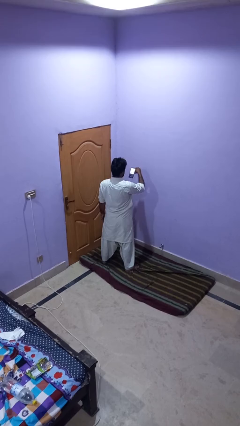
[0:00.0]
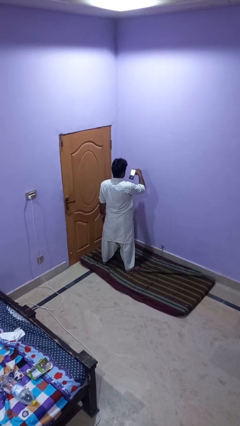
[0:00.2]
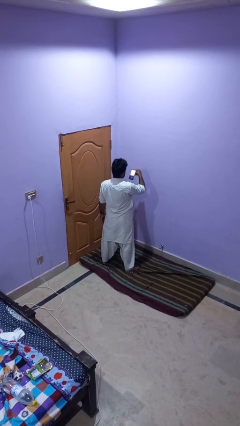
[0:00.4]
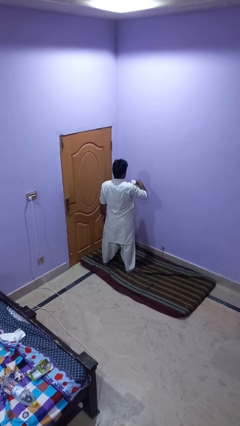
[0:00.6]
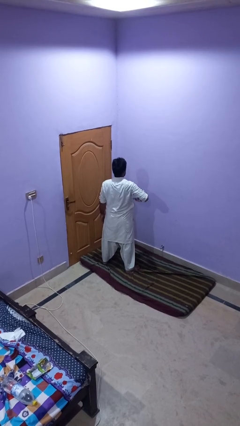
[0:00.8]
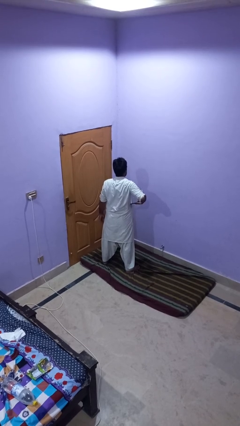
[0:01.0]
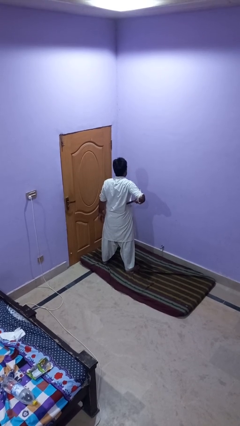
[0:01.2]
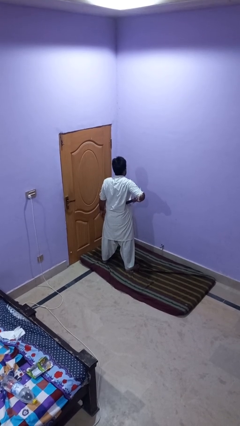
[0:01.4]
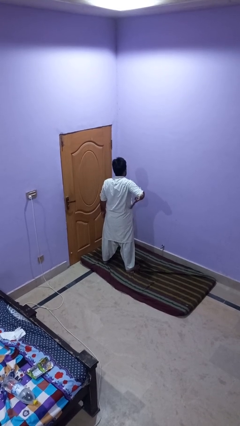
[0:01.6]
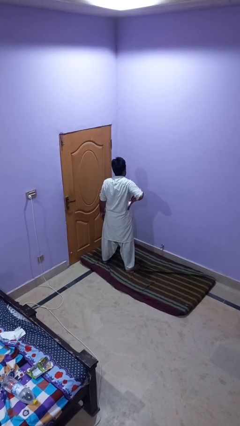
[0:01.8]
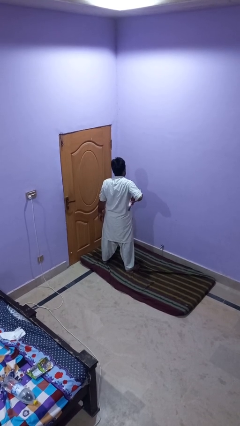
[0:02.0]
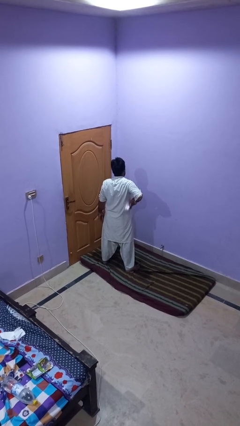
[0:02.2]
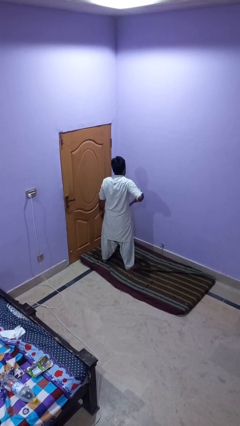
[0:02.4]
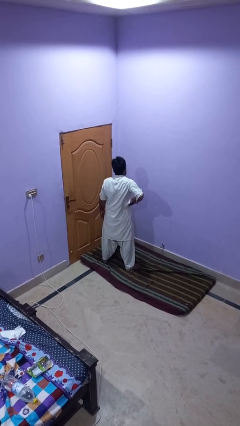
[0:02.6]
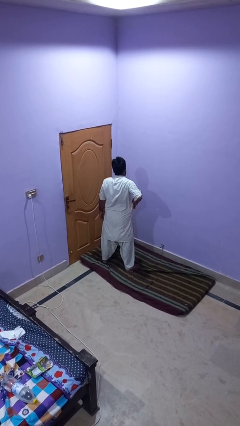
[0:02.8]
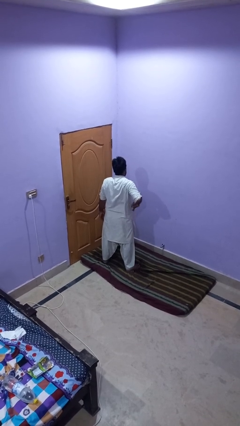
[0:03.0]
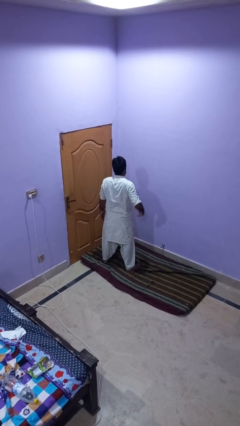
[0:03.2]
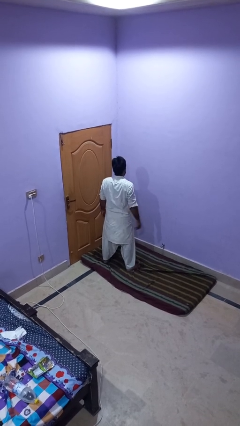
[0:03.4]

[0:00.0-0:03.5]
person puts phone into pocket

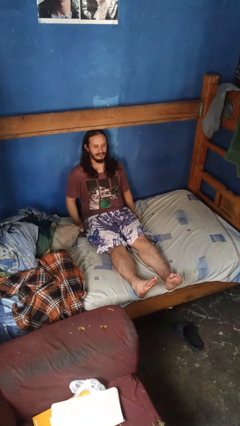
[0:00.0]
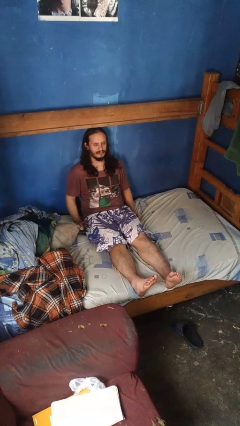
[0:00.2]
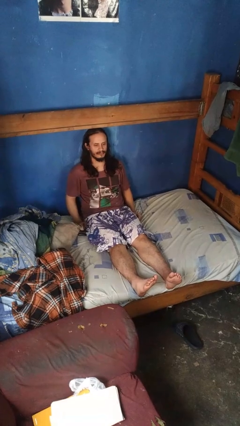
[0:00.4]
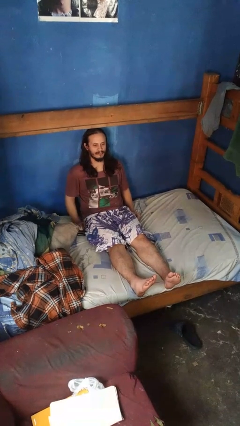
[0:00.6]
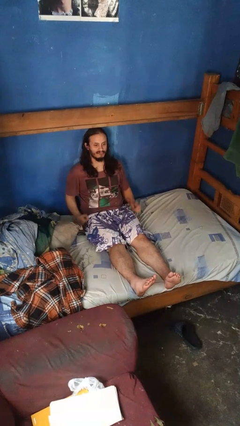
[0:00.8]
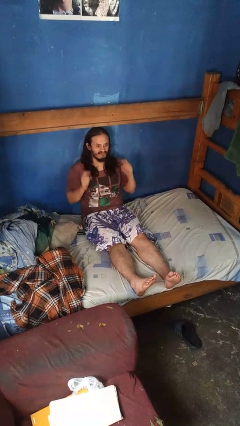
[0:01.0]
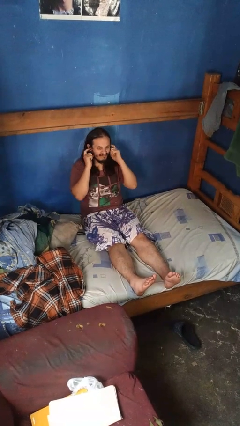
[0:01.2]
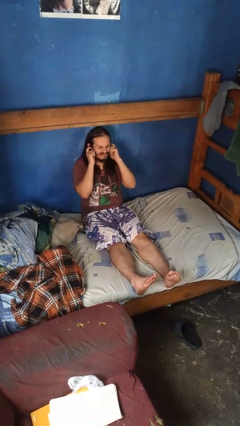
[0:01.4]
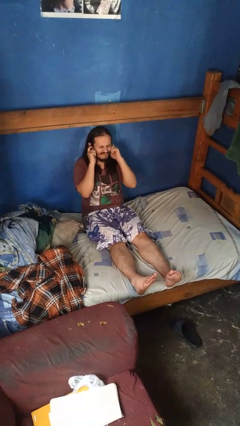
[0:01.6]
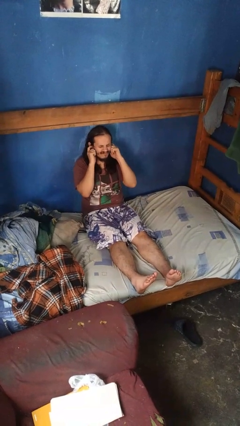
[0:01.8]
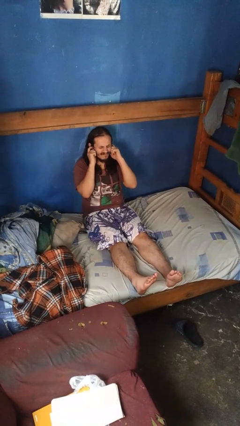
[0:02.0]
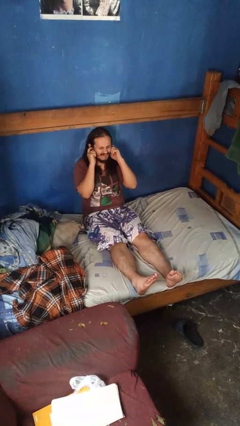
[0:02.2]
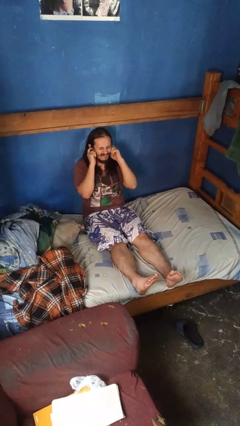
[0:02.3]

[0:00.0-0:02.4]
person puts fingers in ear

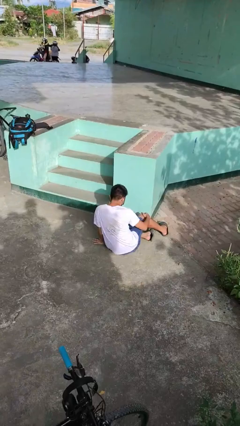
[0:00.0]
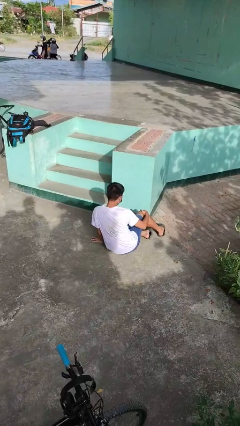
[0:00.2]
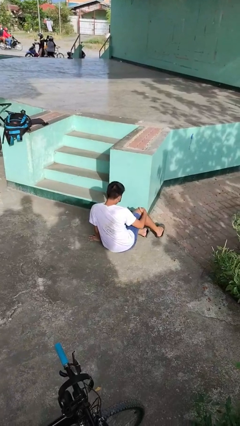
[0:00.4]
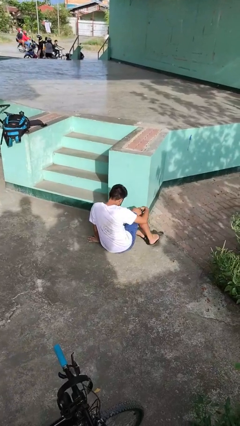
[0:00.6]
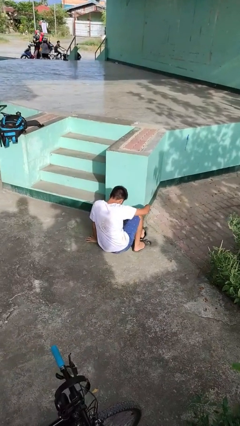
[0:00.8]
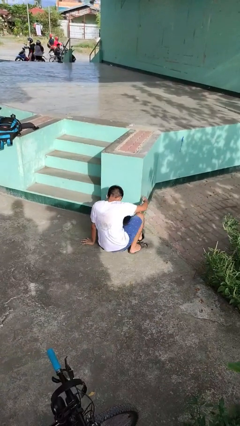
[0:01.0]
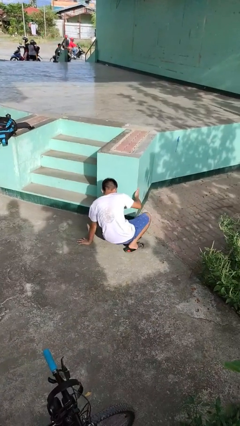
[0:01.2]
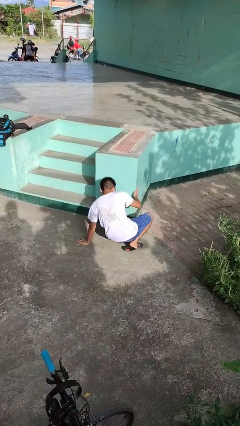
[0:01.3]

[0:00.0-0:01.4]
person lies down on floor

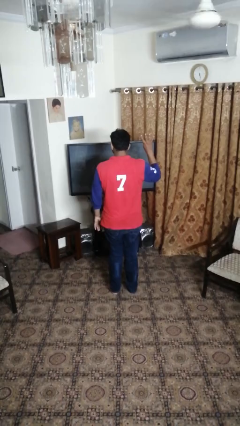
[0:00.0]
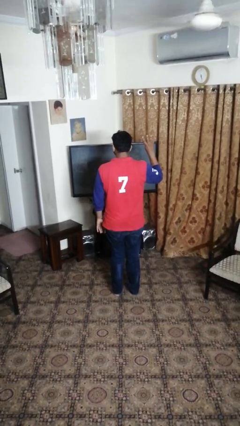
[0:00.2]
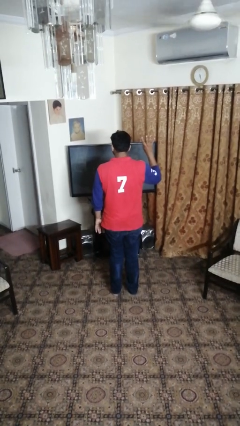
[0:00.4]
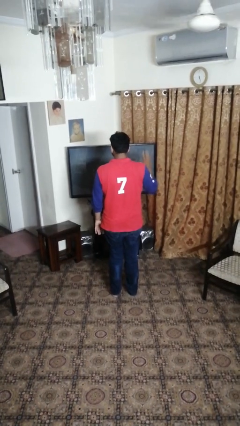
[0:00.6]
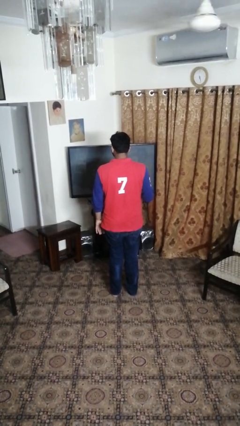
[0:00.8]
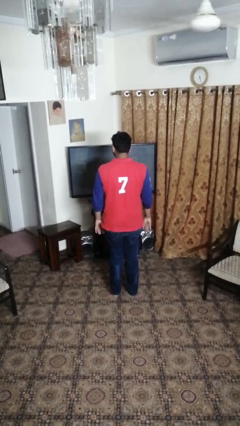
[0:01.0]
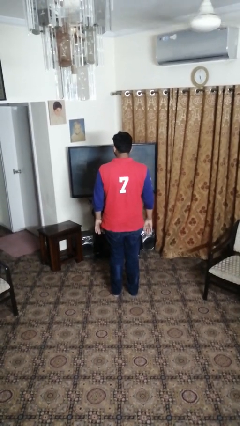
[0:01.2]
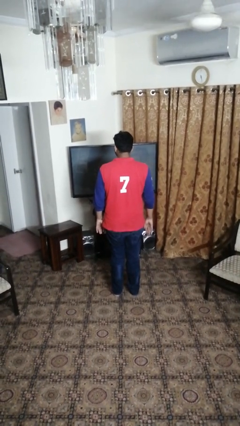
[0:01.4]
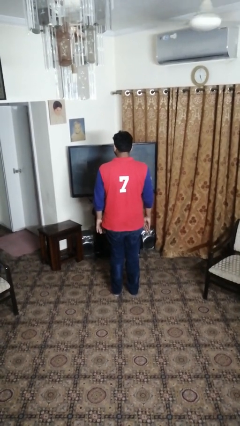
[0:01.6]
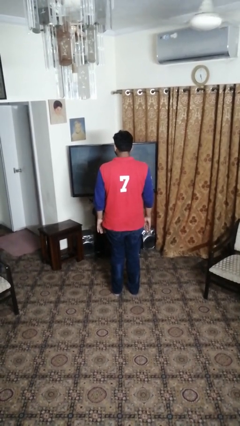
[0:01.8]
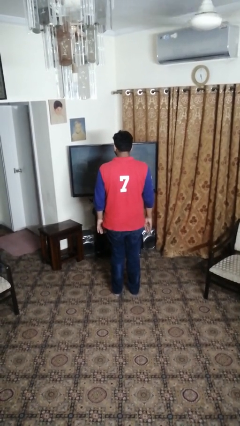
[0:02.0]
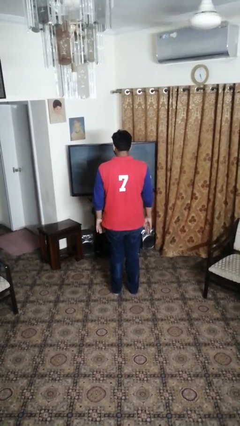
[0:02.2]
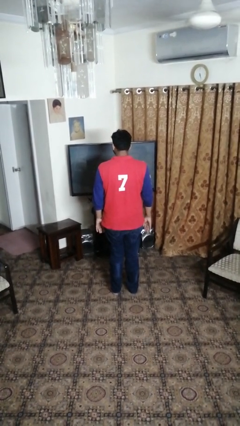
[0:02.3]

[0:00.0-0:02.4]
person gestures number four

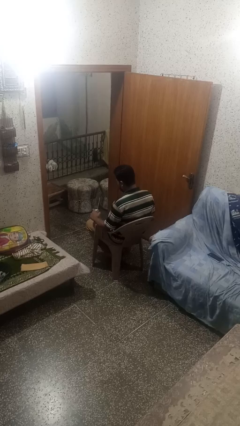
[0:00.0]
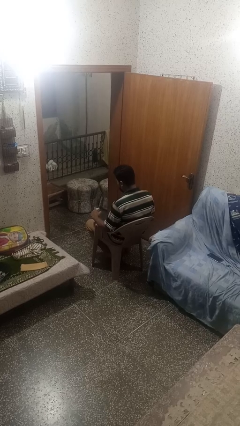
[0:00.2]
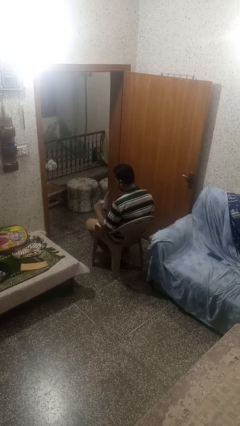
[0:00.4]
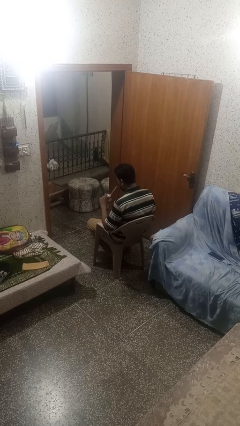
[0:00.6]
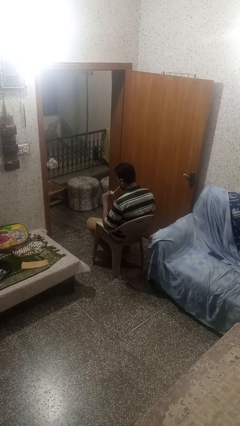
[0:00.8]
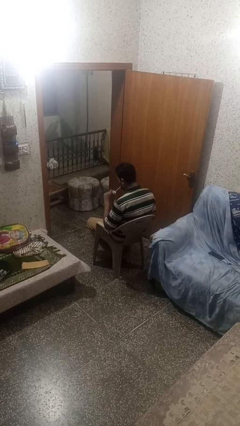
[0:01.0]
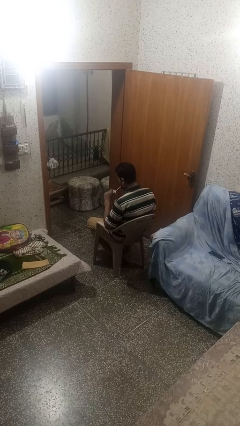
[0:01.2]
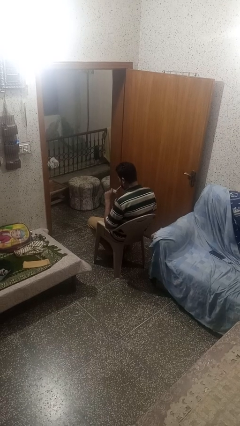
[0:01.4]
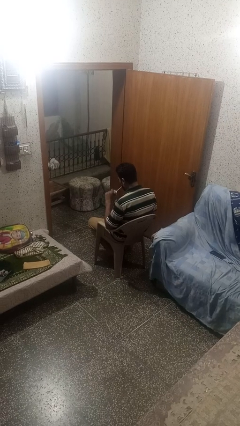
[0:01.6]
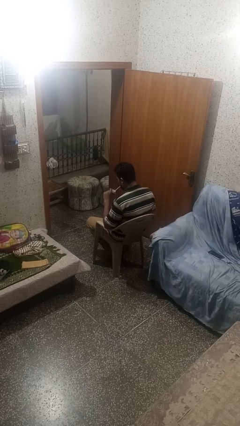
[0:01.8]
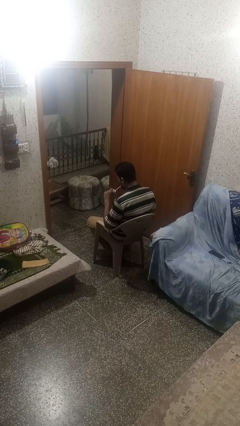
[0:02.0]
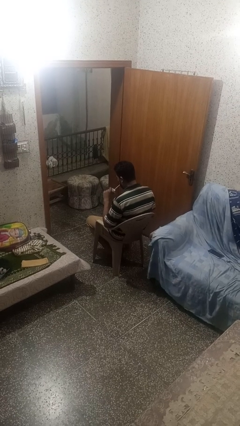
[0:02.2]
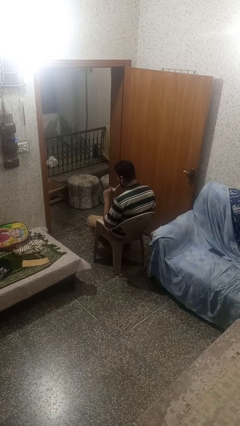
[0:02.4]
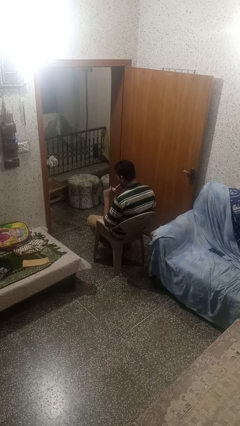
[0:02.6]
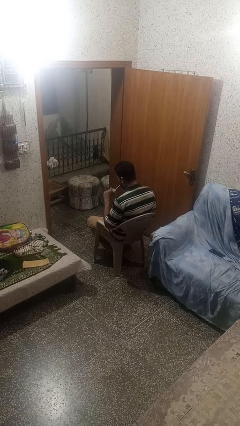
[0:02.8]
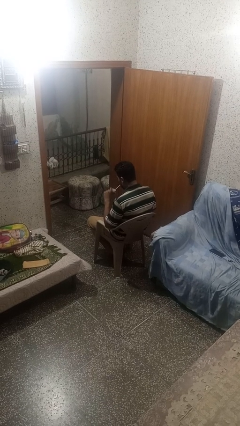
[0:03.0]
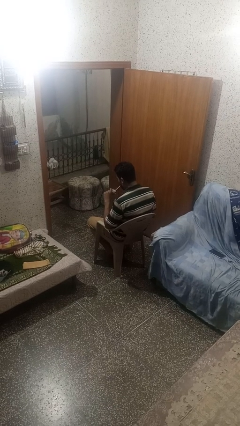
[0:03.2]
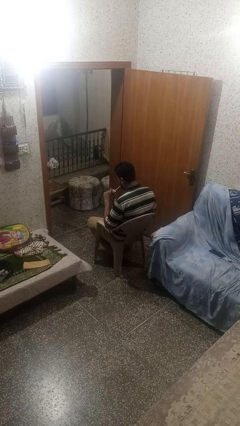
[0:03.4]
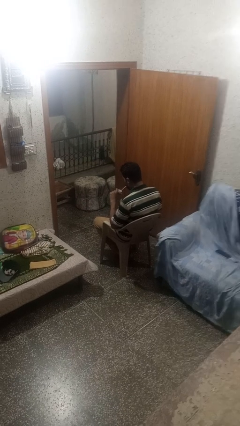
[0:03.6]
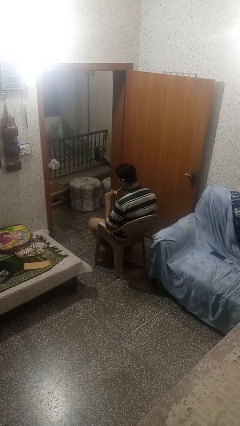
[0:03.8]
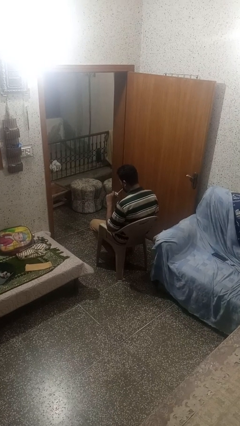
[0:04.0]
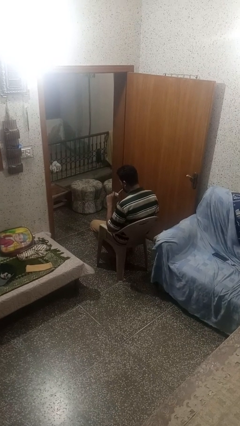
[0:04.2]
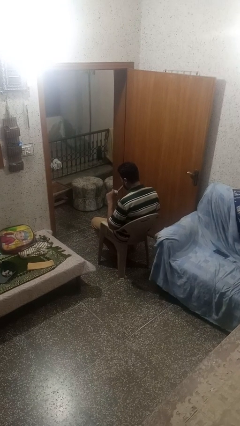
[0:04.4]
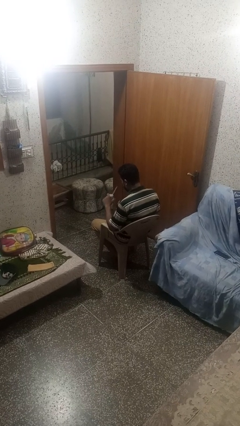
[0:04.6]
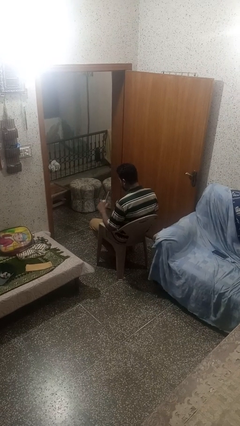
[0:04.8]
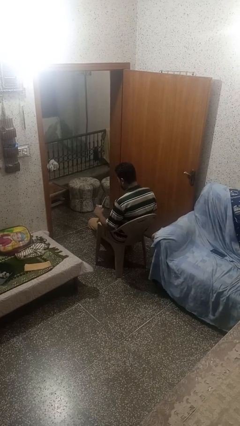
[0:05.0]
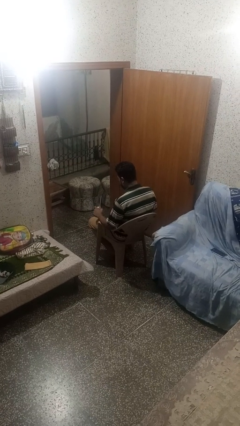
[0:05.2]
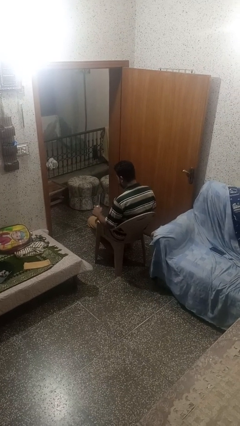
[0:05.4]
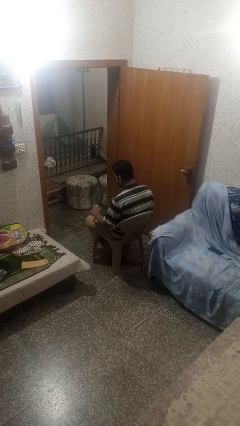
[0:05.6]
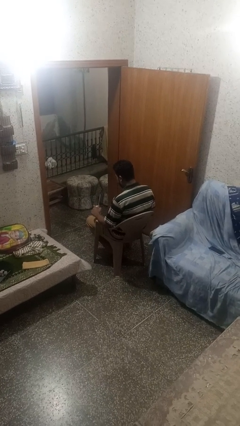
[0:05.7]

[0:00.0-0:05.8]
person drinks from straw

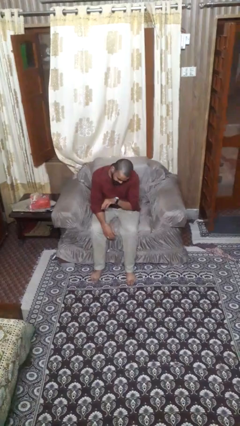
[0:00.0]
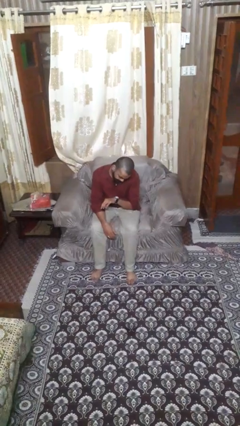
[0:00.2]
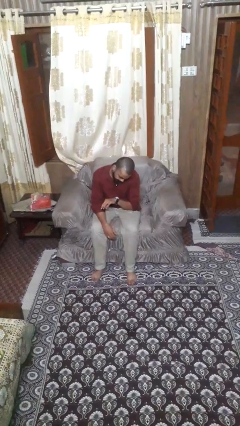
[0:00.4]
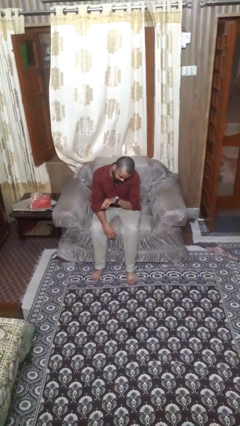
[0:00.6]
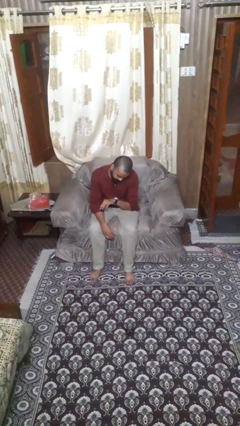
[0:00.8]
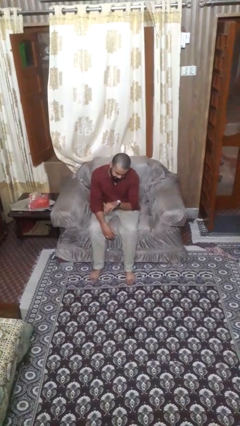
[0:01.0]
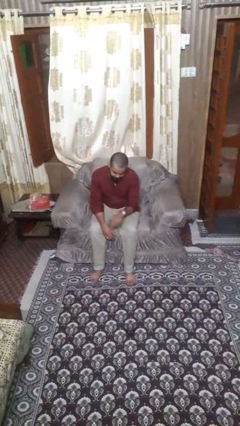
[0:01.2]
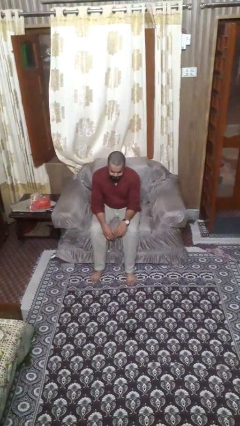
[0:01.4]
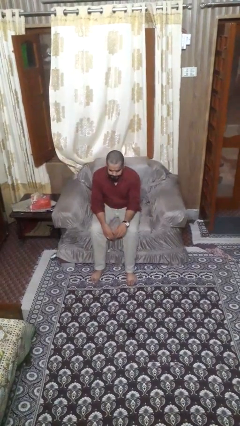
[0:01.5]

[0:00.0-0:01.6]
person looks at wristwatch

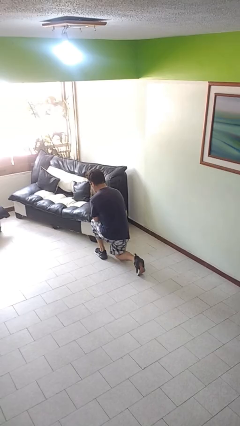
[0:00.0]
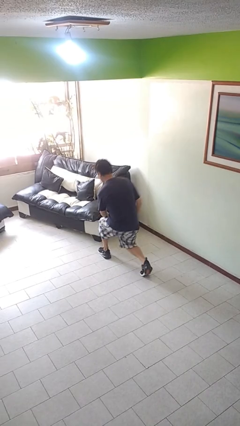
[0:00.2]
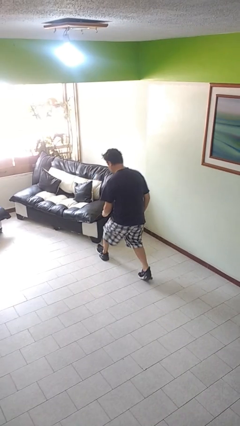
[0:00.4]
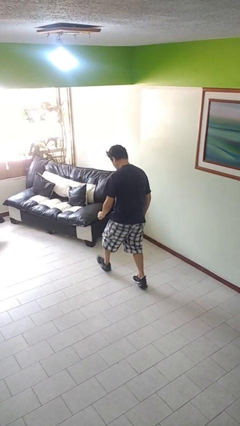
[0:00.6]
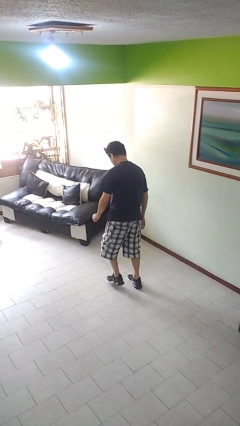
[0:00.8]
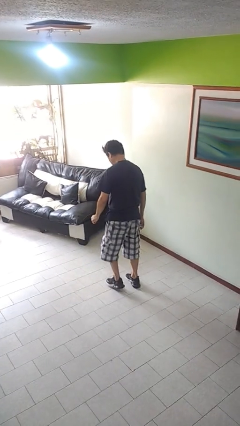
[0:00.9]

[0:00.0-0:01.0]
person stands up from floor
